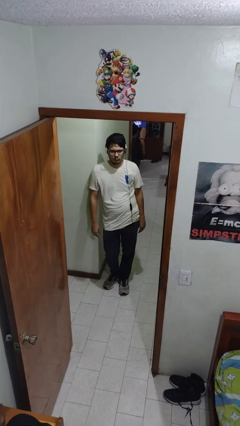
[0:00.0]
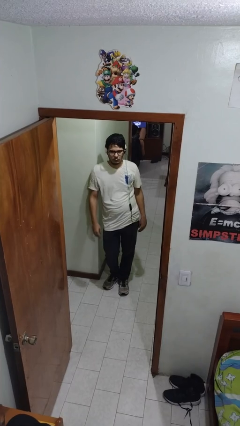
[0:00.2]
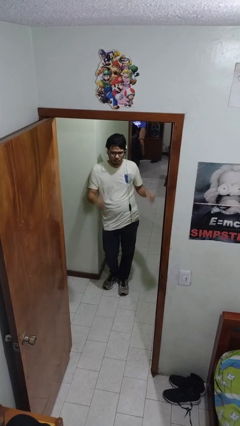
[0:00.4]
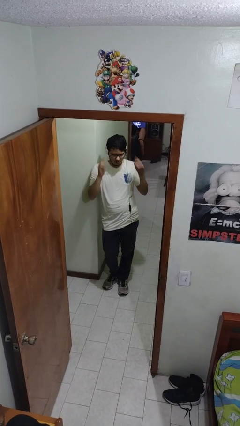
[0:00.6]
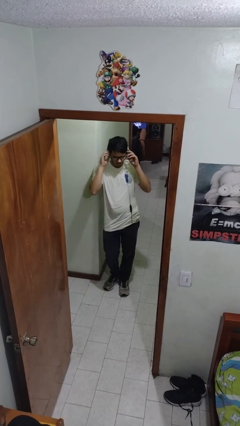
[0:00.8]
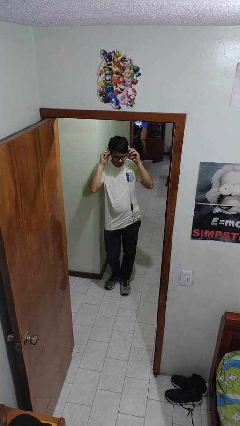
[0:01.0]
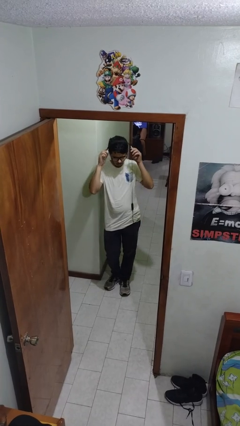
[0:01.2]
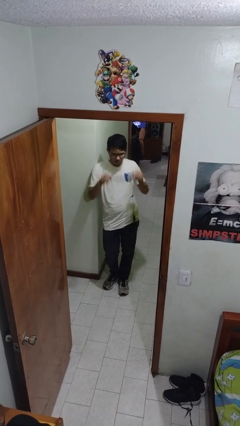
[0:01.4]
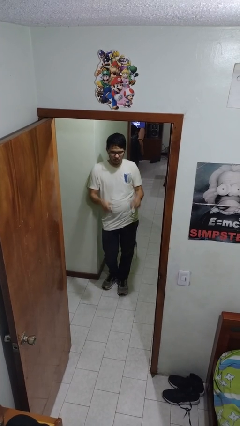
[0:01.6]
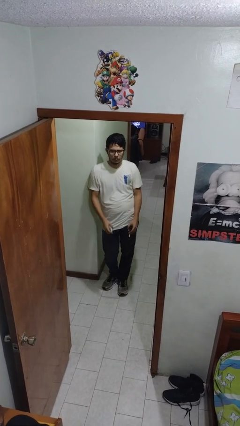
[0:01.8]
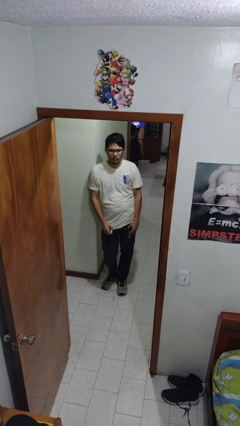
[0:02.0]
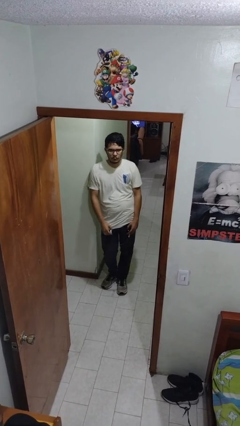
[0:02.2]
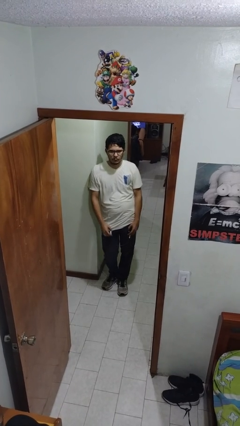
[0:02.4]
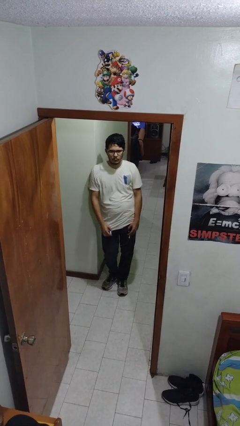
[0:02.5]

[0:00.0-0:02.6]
person takes off headphones

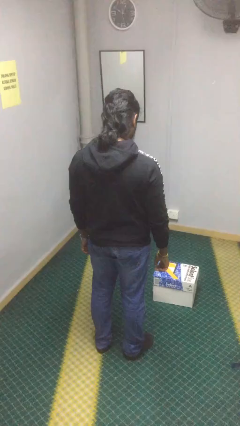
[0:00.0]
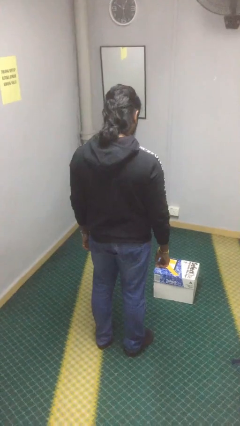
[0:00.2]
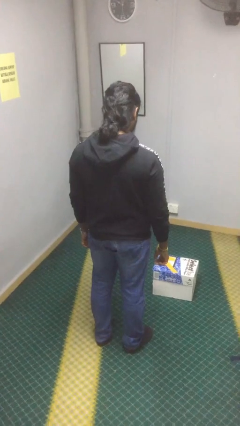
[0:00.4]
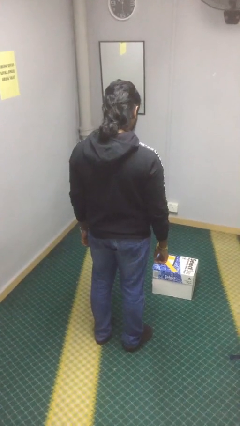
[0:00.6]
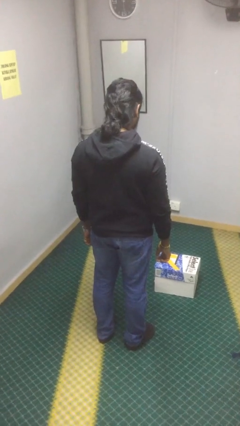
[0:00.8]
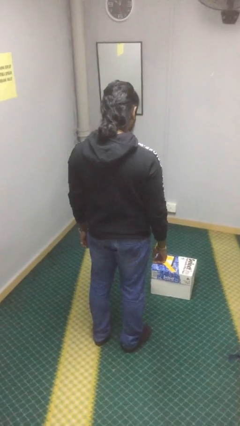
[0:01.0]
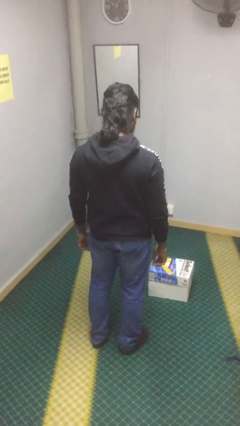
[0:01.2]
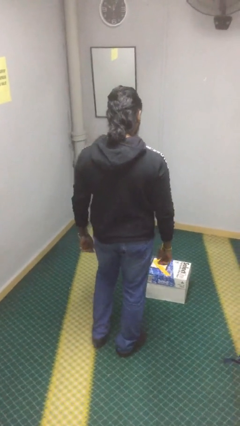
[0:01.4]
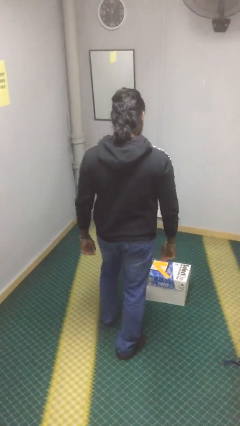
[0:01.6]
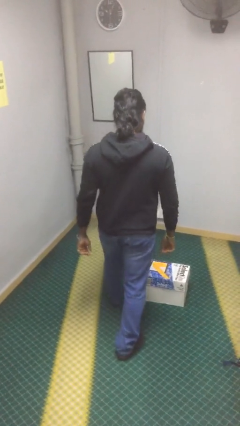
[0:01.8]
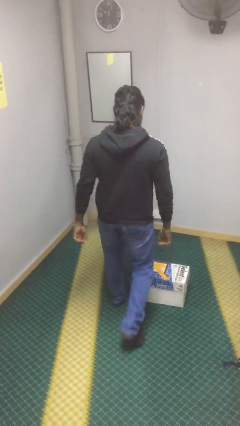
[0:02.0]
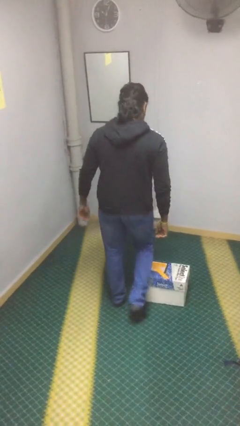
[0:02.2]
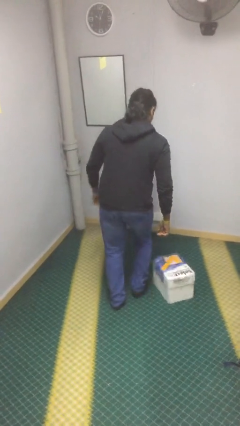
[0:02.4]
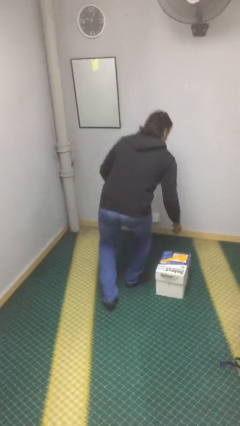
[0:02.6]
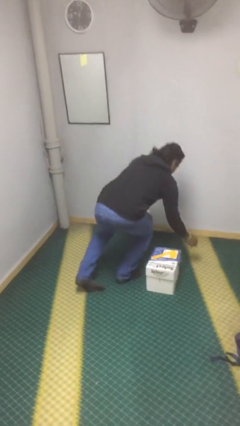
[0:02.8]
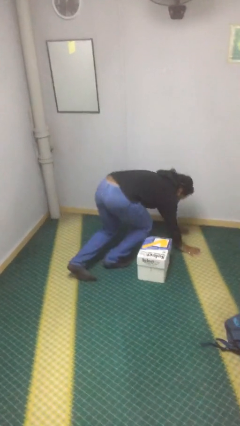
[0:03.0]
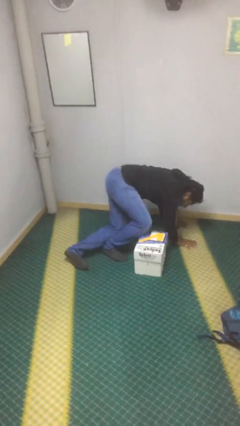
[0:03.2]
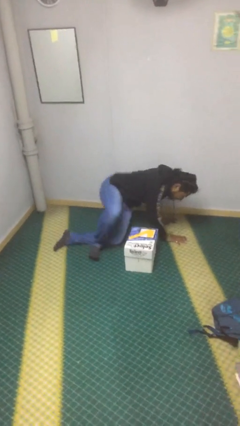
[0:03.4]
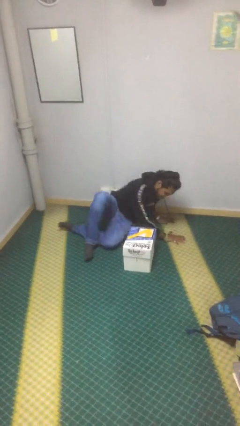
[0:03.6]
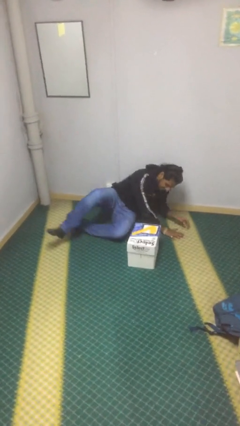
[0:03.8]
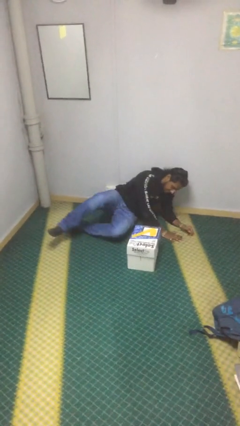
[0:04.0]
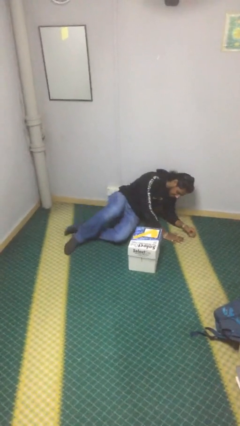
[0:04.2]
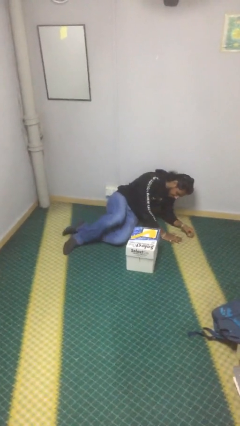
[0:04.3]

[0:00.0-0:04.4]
person trips on object on floor

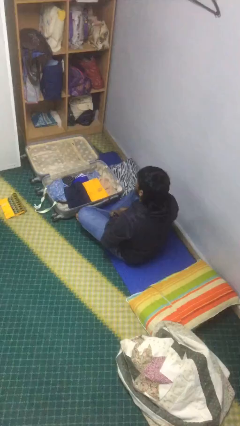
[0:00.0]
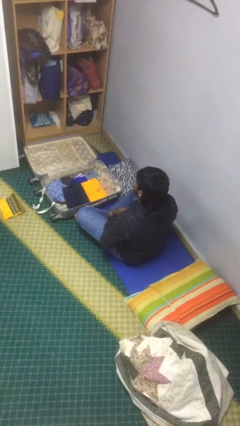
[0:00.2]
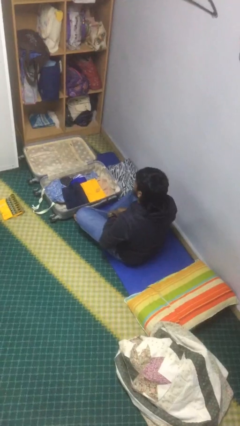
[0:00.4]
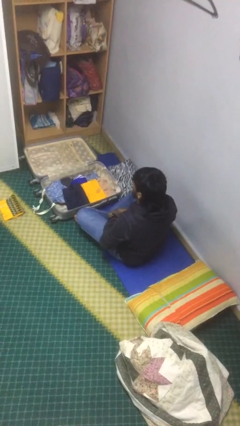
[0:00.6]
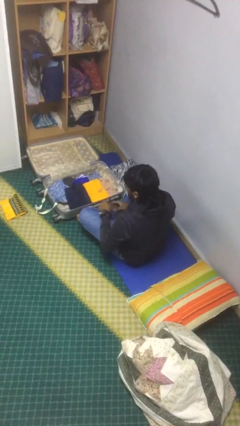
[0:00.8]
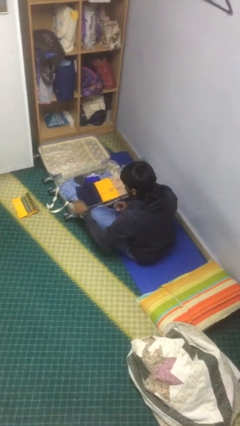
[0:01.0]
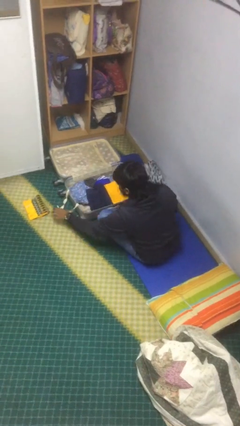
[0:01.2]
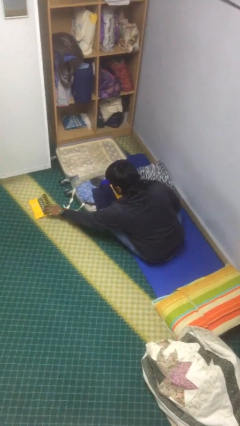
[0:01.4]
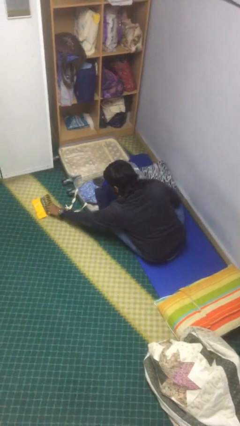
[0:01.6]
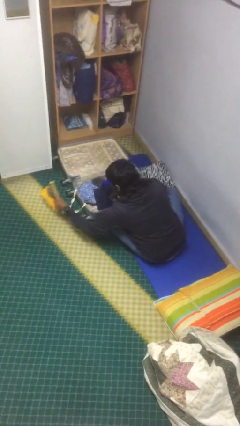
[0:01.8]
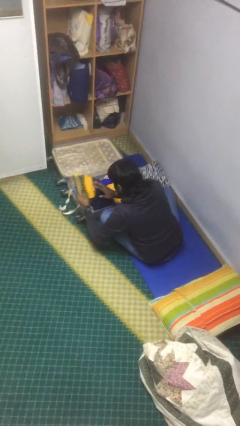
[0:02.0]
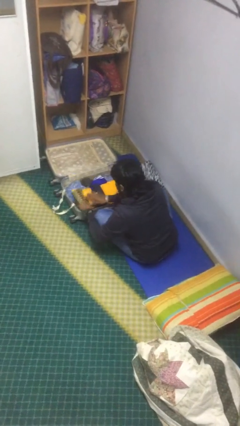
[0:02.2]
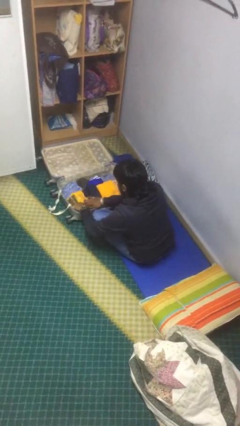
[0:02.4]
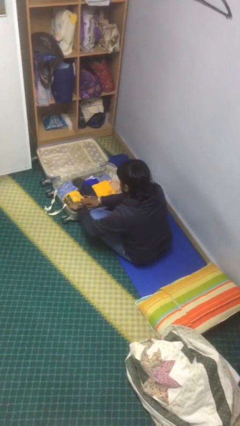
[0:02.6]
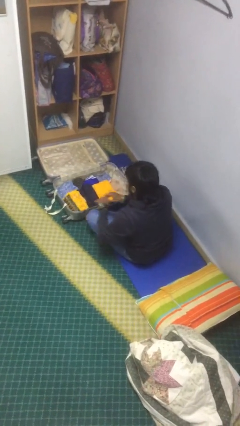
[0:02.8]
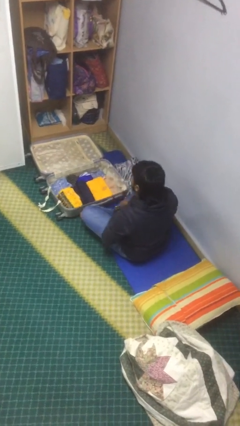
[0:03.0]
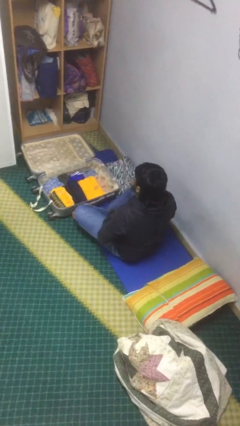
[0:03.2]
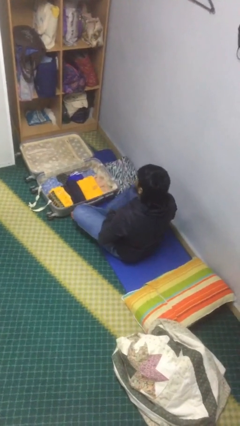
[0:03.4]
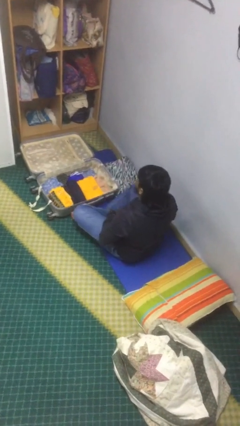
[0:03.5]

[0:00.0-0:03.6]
person loads clothes into suitcase

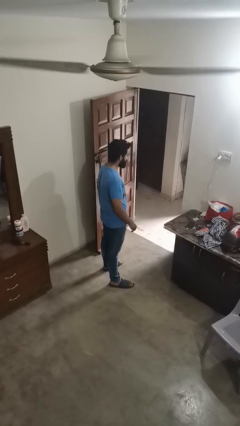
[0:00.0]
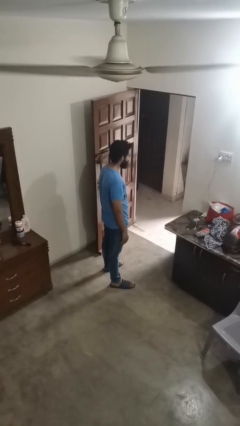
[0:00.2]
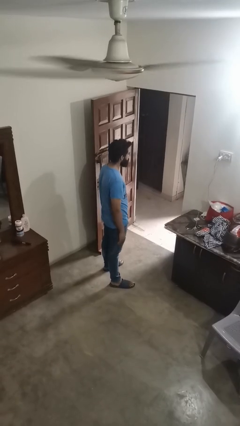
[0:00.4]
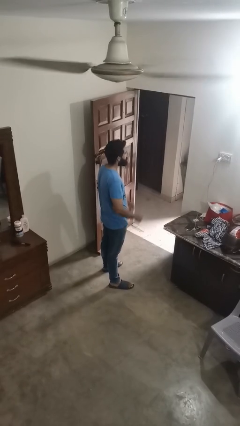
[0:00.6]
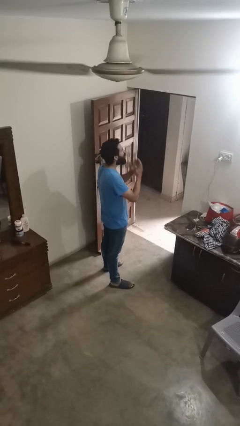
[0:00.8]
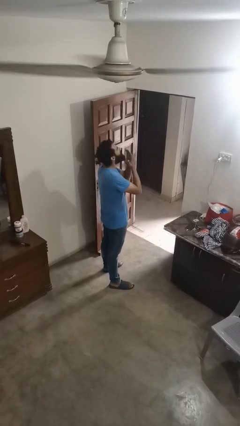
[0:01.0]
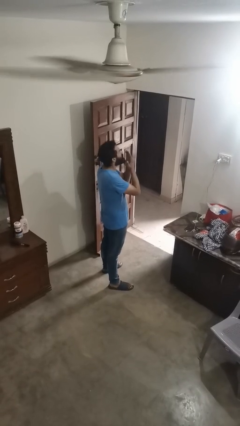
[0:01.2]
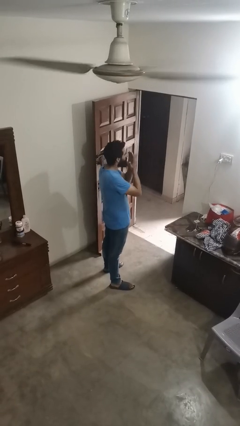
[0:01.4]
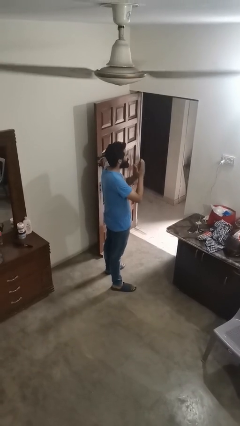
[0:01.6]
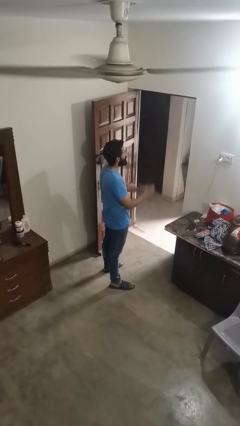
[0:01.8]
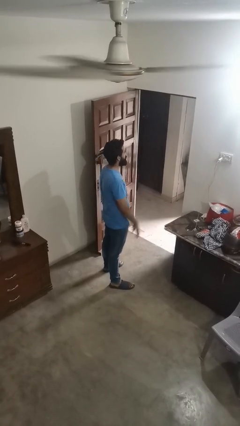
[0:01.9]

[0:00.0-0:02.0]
person sneezes into hand

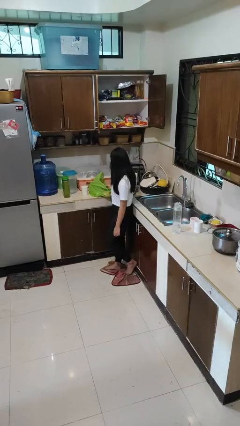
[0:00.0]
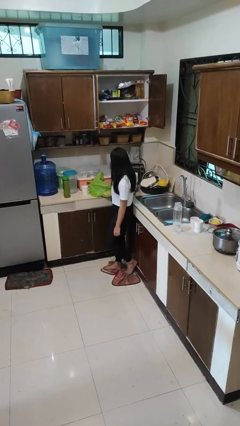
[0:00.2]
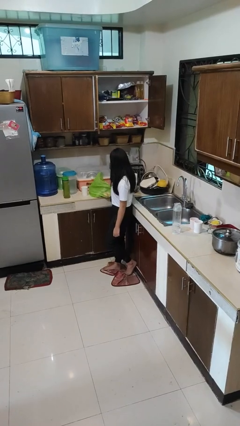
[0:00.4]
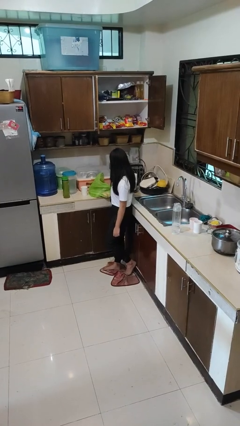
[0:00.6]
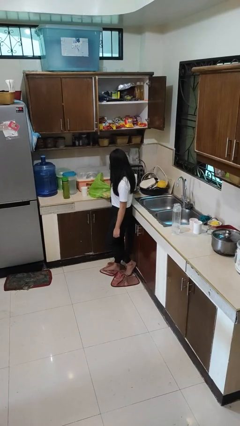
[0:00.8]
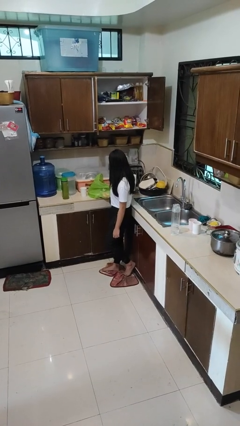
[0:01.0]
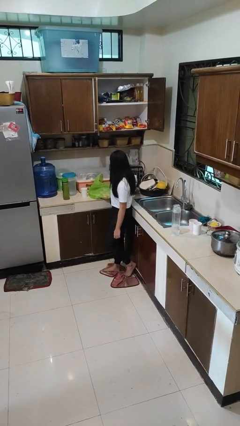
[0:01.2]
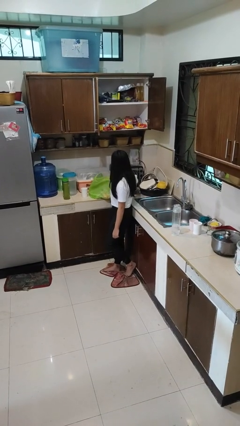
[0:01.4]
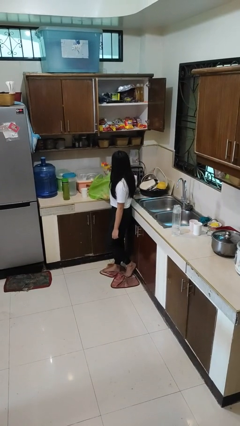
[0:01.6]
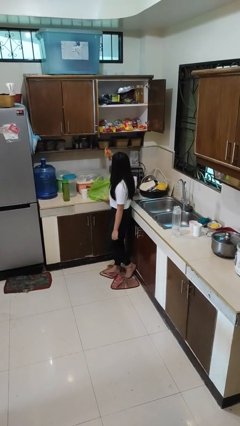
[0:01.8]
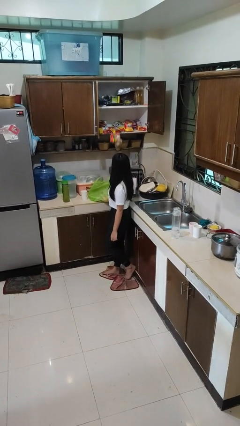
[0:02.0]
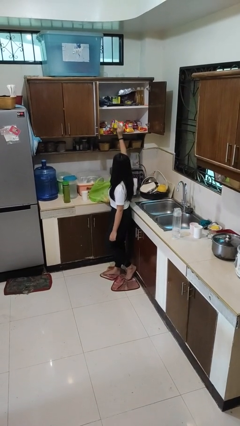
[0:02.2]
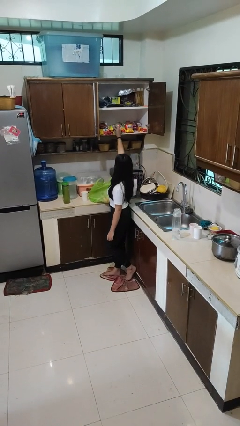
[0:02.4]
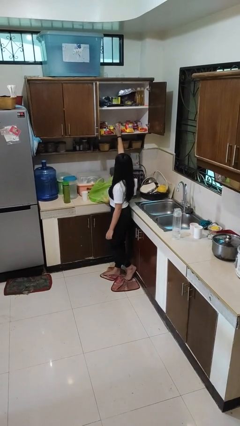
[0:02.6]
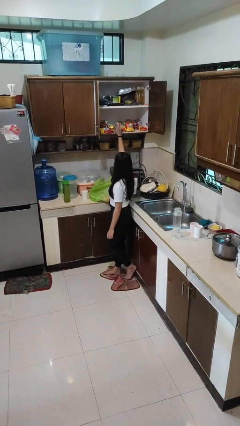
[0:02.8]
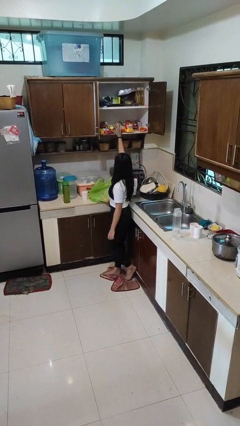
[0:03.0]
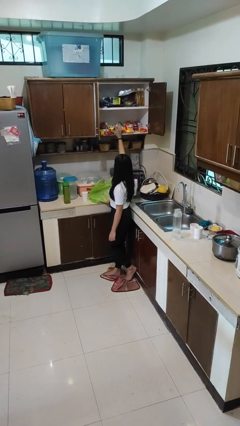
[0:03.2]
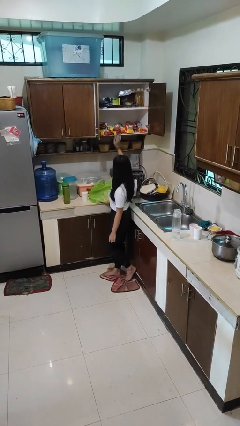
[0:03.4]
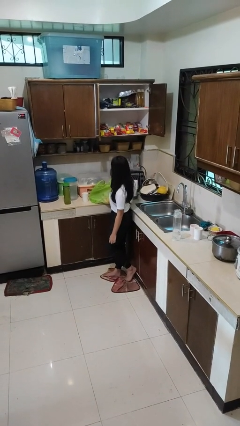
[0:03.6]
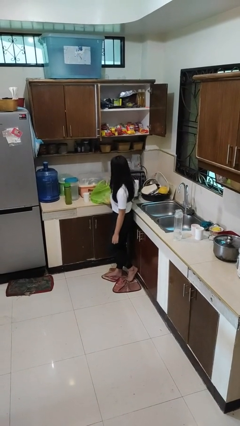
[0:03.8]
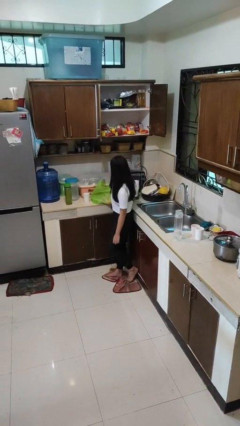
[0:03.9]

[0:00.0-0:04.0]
person loads groceries into cabinet

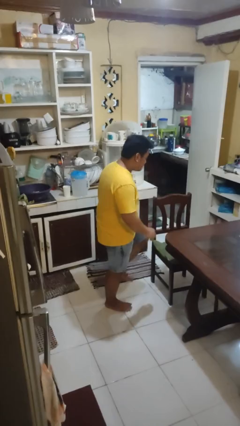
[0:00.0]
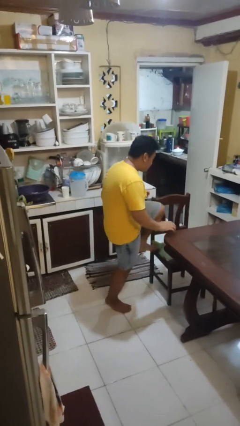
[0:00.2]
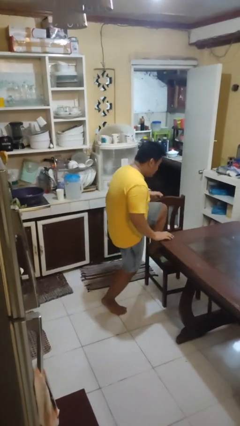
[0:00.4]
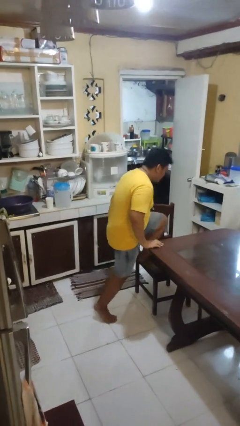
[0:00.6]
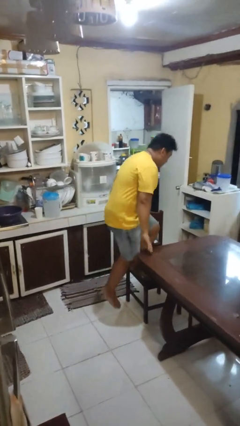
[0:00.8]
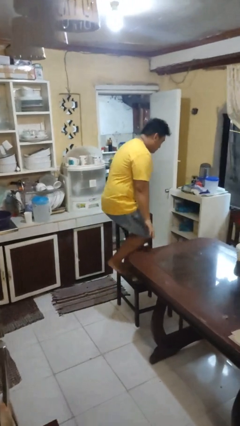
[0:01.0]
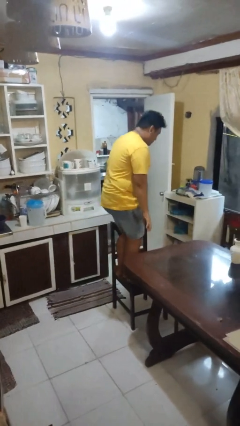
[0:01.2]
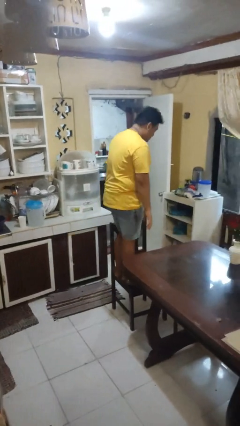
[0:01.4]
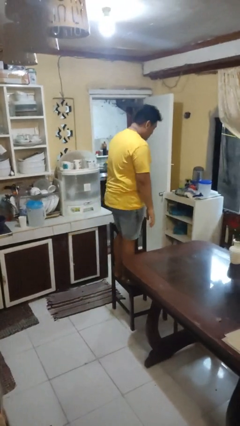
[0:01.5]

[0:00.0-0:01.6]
person climbs on chair
